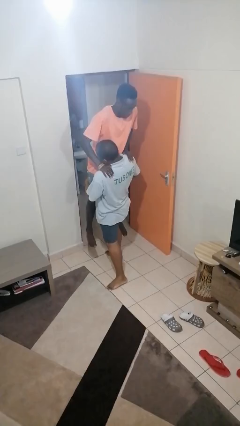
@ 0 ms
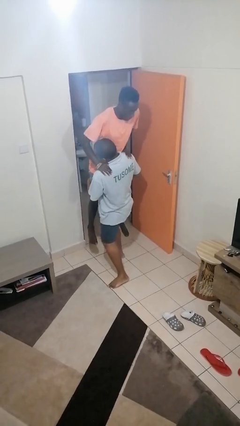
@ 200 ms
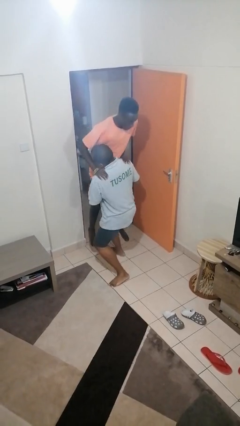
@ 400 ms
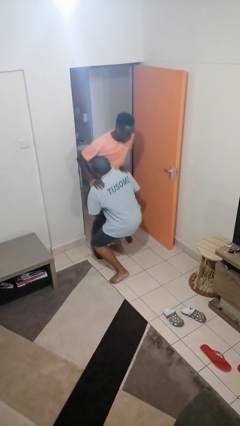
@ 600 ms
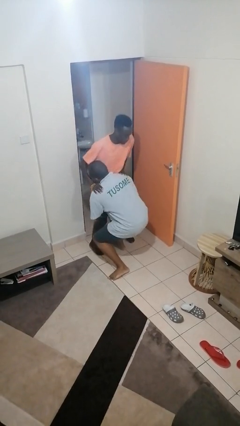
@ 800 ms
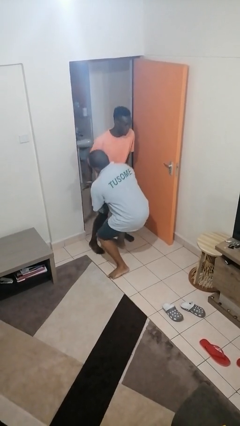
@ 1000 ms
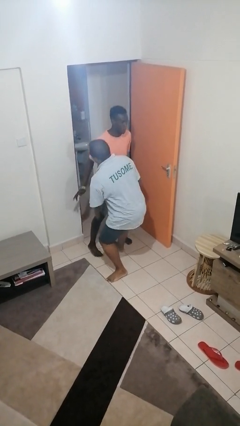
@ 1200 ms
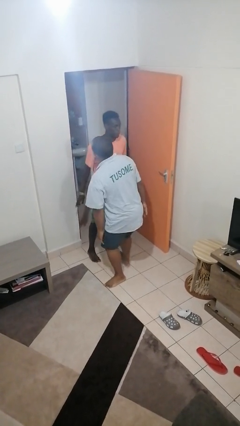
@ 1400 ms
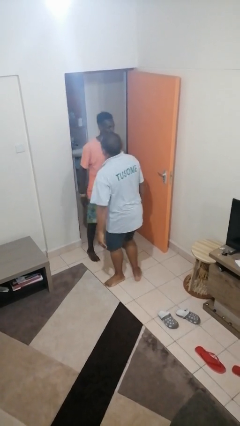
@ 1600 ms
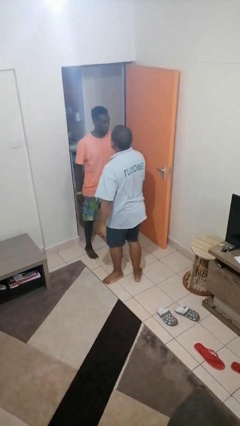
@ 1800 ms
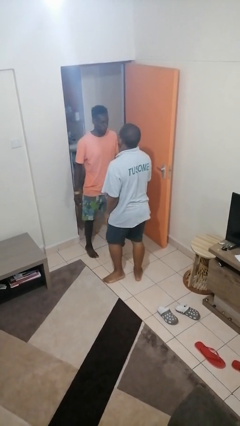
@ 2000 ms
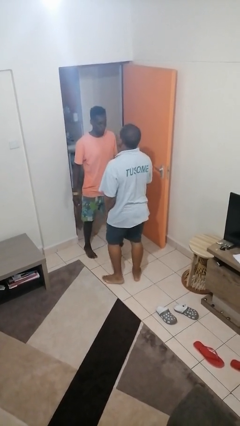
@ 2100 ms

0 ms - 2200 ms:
person puts down person

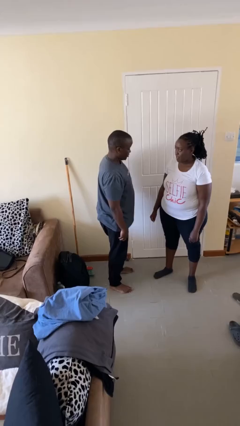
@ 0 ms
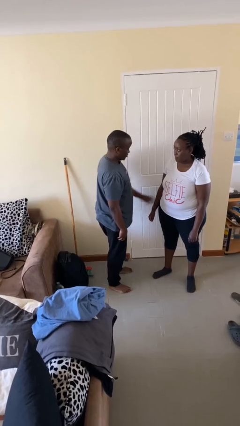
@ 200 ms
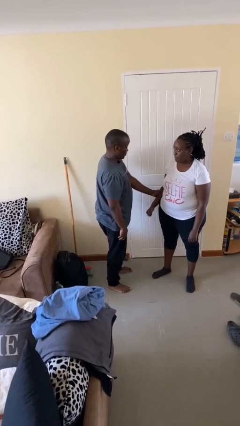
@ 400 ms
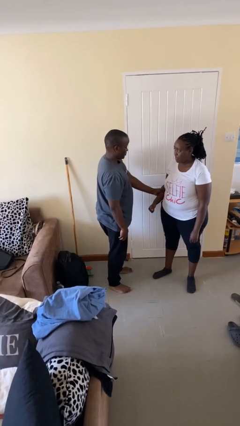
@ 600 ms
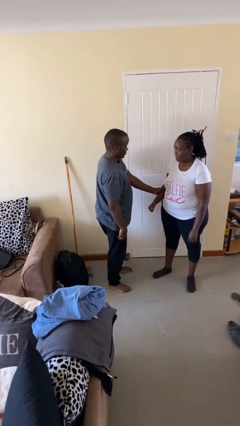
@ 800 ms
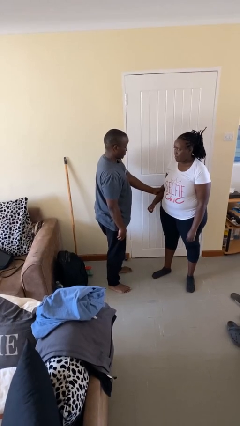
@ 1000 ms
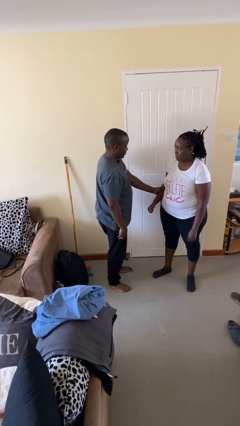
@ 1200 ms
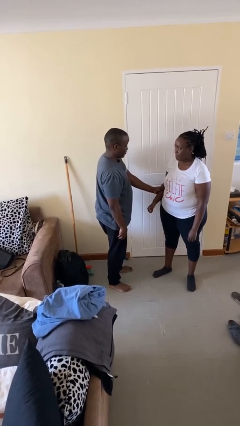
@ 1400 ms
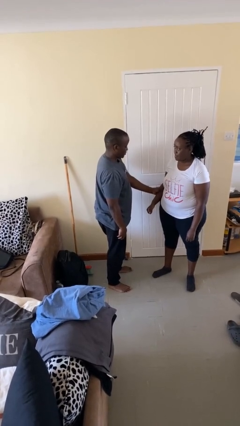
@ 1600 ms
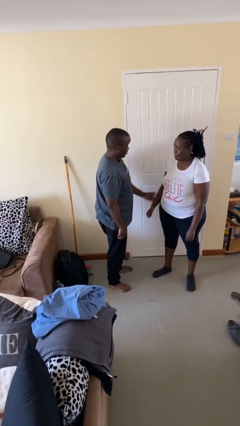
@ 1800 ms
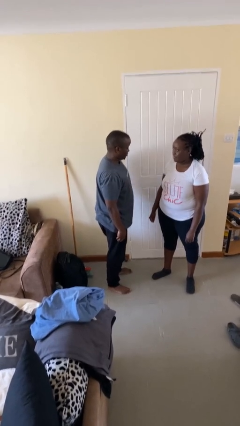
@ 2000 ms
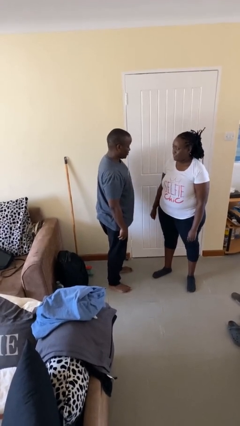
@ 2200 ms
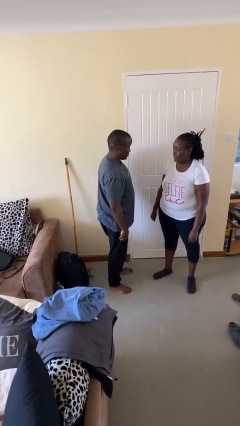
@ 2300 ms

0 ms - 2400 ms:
person grabs person by forearm

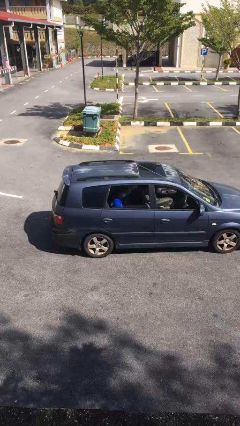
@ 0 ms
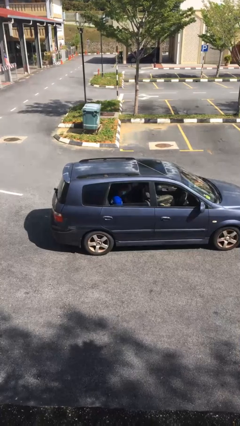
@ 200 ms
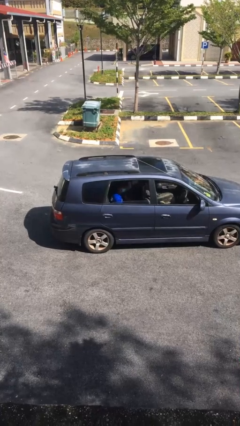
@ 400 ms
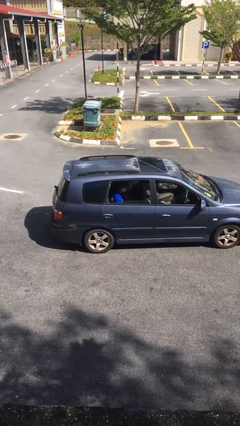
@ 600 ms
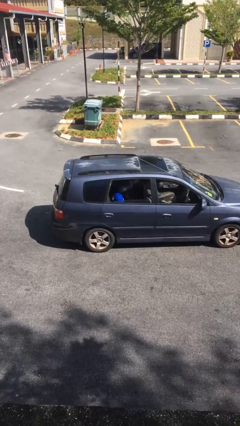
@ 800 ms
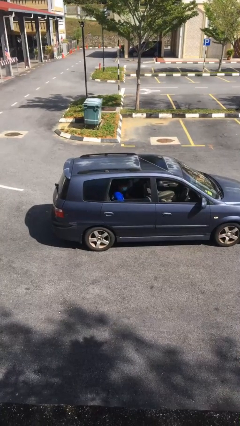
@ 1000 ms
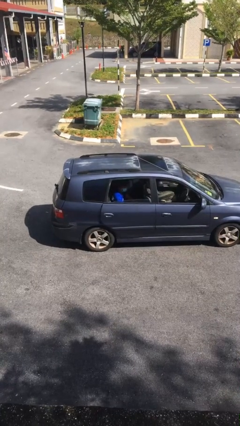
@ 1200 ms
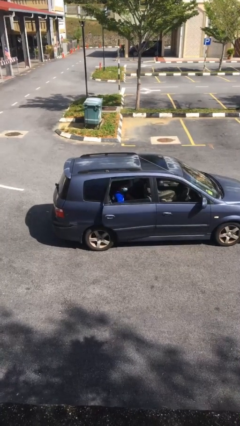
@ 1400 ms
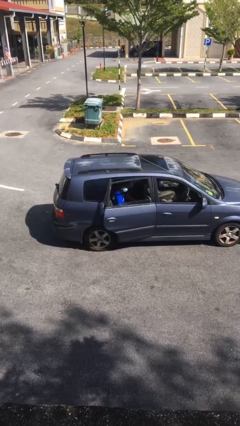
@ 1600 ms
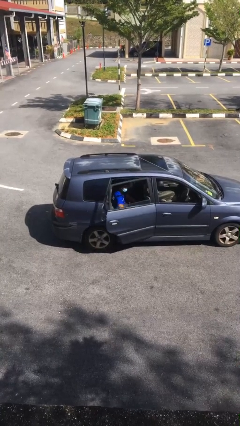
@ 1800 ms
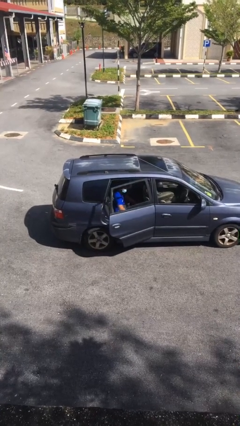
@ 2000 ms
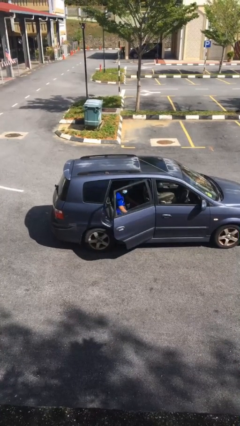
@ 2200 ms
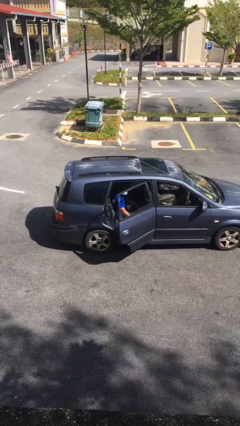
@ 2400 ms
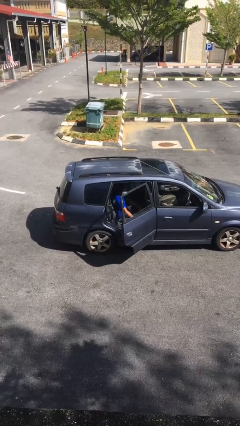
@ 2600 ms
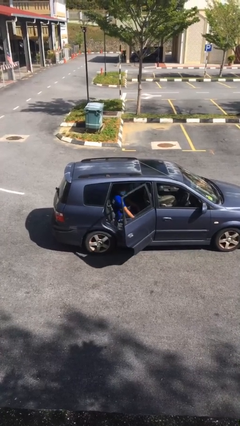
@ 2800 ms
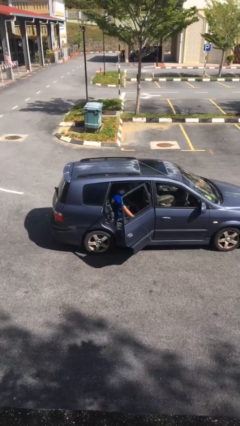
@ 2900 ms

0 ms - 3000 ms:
person opens car door

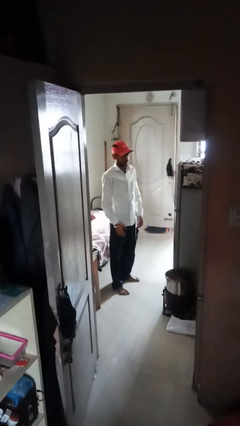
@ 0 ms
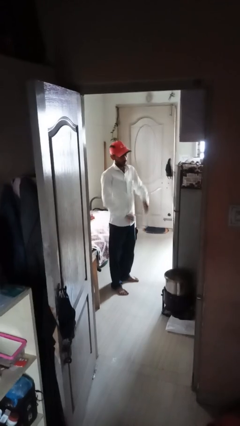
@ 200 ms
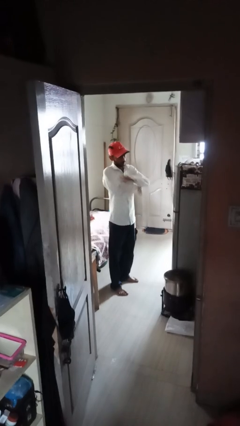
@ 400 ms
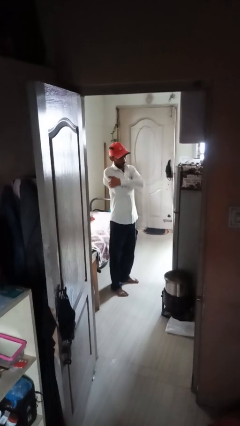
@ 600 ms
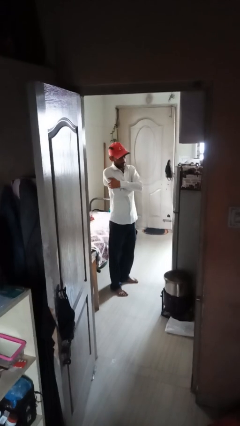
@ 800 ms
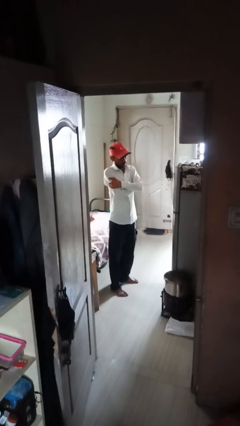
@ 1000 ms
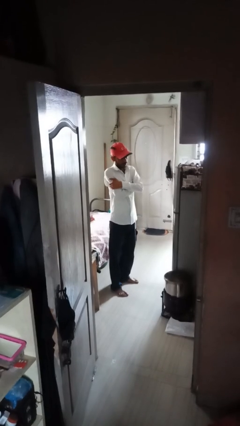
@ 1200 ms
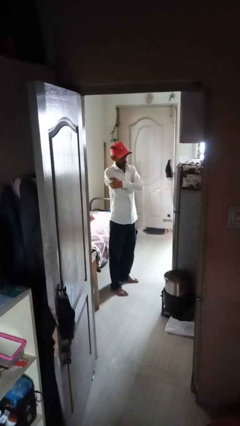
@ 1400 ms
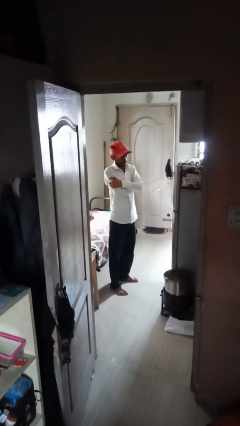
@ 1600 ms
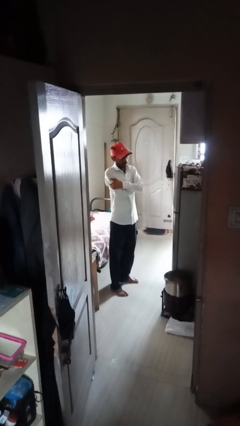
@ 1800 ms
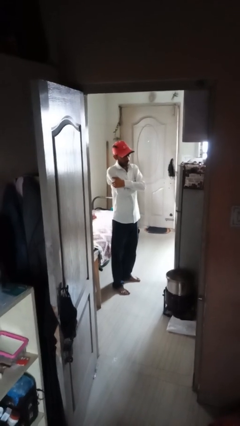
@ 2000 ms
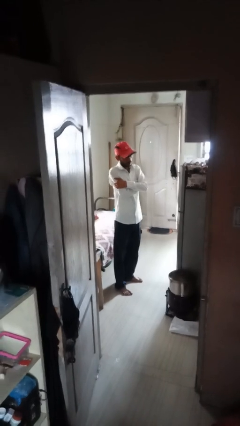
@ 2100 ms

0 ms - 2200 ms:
person crosses arms

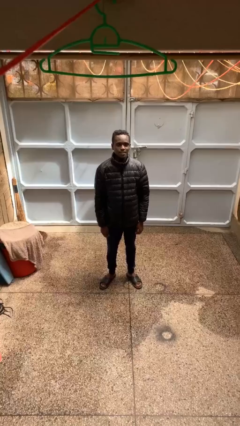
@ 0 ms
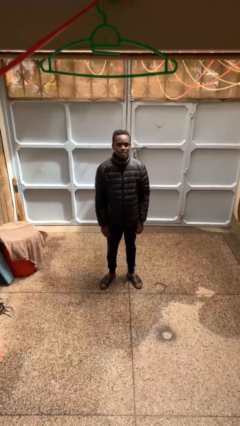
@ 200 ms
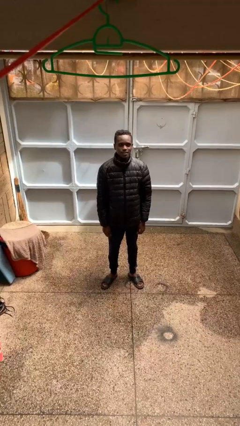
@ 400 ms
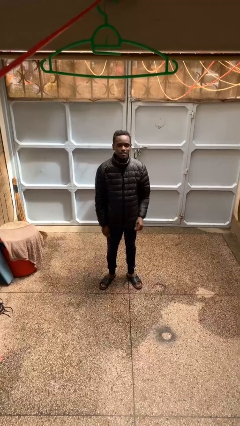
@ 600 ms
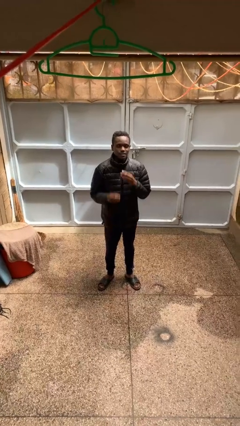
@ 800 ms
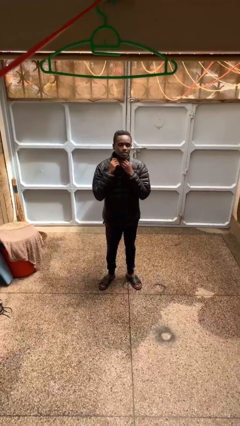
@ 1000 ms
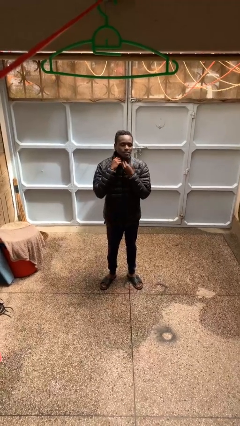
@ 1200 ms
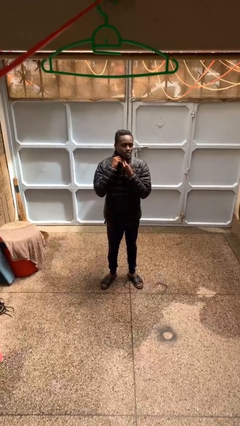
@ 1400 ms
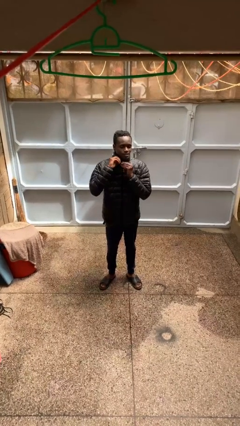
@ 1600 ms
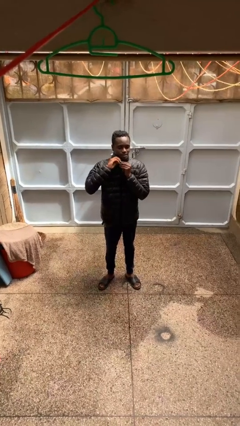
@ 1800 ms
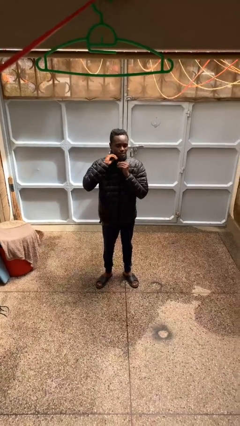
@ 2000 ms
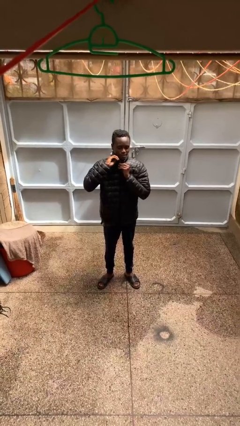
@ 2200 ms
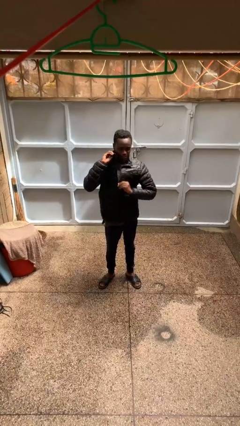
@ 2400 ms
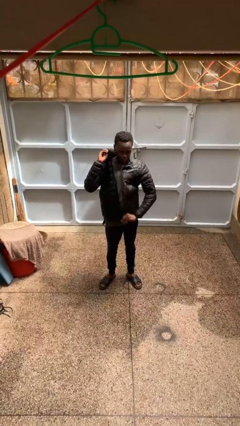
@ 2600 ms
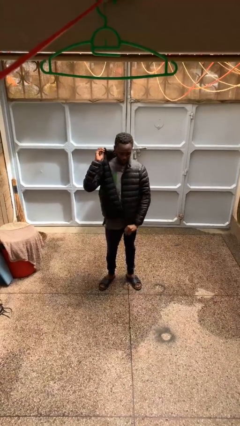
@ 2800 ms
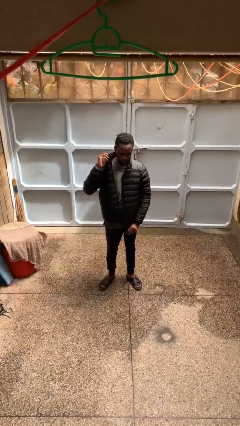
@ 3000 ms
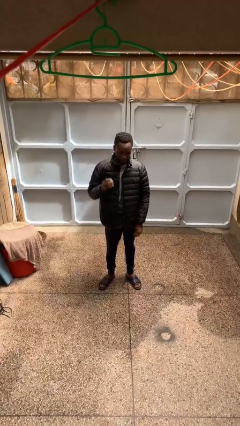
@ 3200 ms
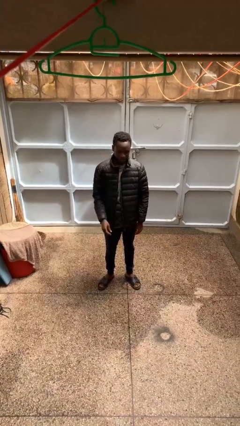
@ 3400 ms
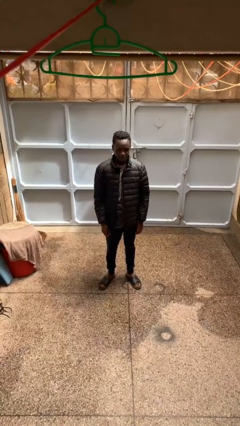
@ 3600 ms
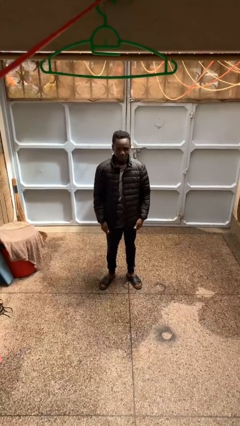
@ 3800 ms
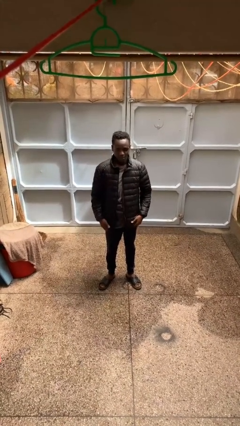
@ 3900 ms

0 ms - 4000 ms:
person unzips jacket

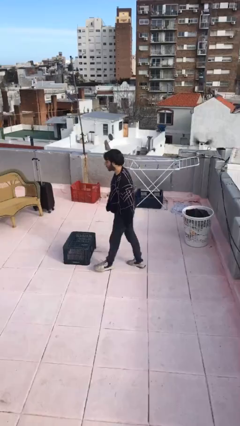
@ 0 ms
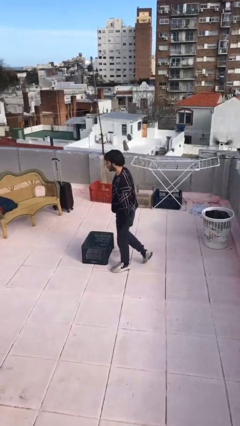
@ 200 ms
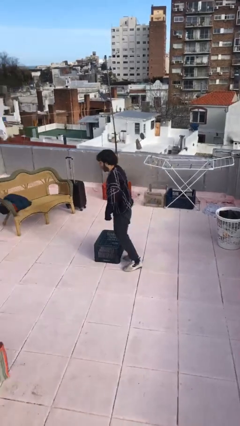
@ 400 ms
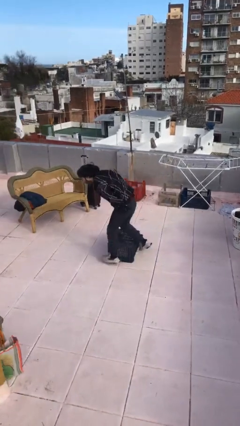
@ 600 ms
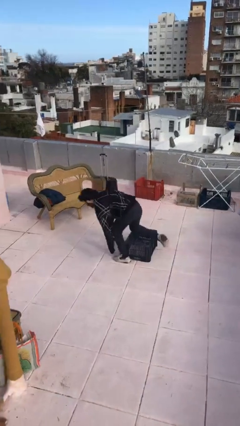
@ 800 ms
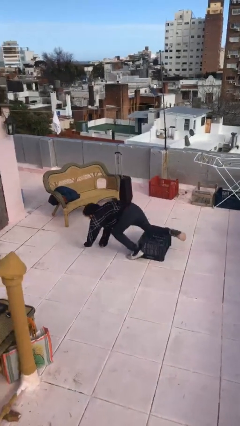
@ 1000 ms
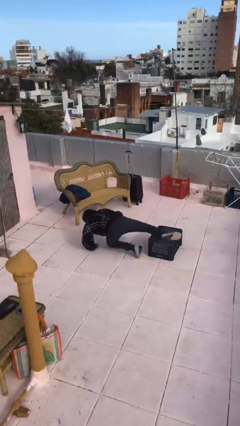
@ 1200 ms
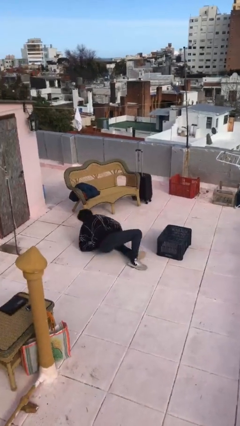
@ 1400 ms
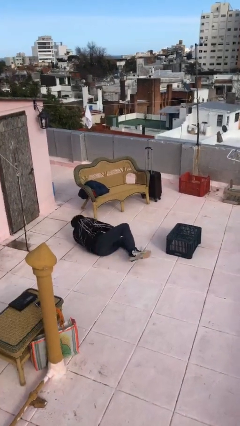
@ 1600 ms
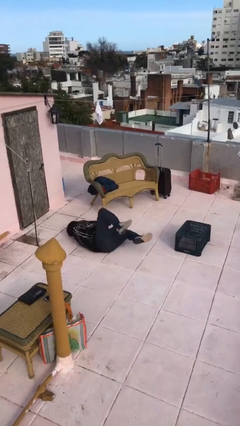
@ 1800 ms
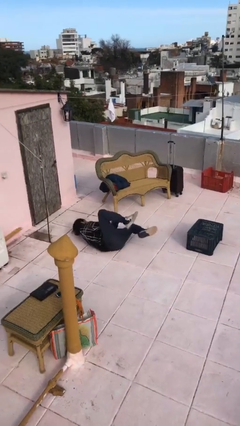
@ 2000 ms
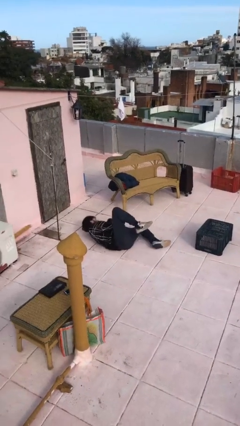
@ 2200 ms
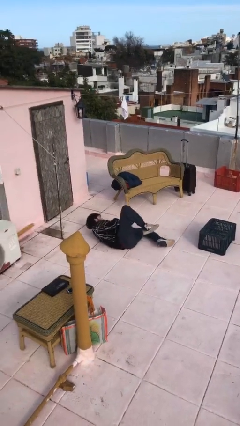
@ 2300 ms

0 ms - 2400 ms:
person trips on object on floor

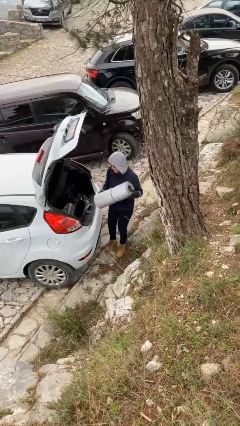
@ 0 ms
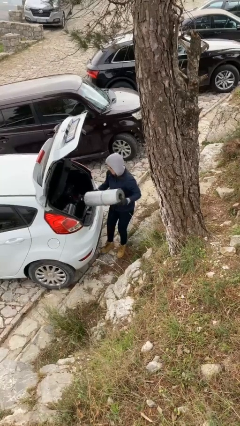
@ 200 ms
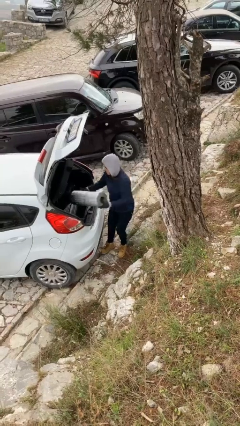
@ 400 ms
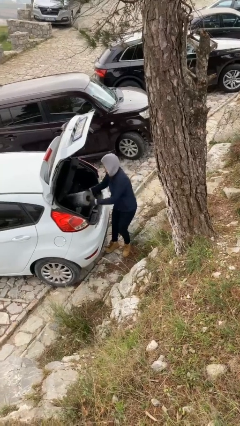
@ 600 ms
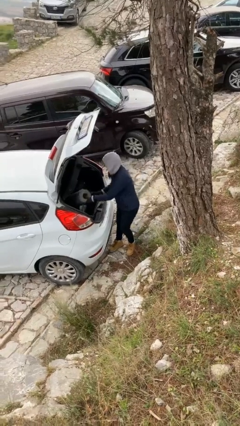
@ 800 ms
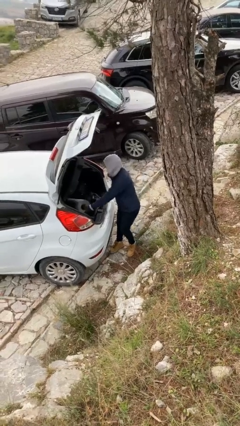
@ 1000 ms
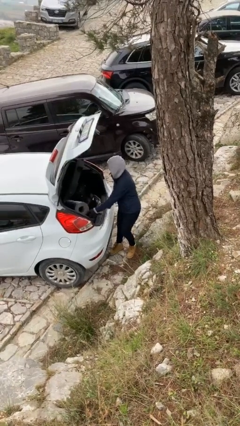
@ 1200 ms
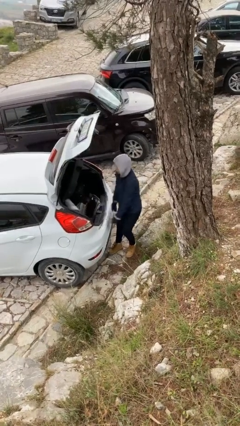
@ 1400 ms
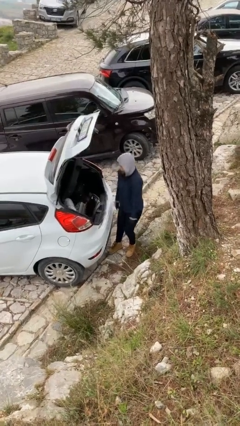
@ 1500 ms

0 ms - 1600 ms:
person loads car
